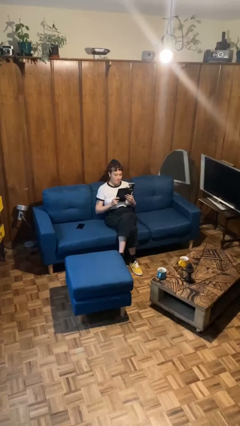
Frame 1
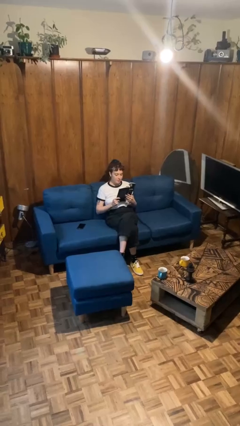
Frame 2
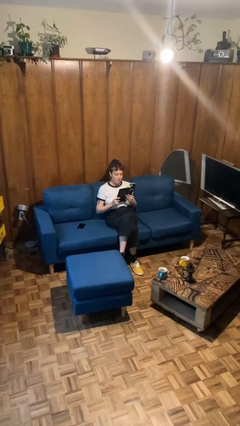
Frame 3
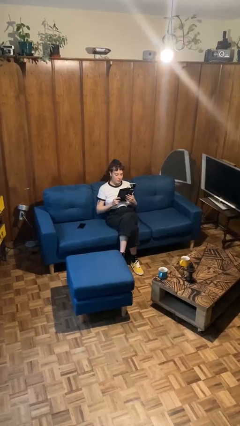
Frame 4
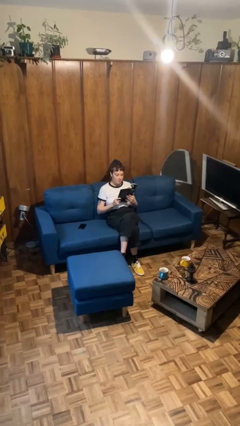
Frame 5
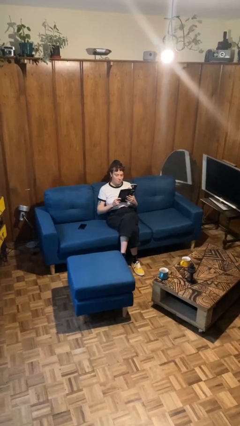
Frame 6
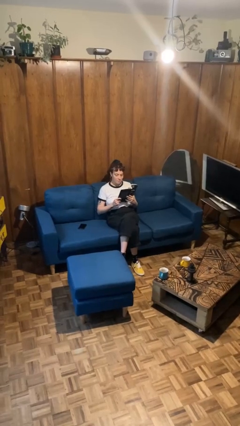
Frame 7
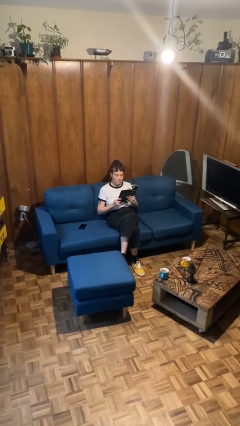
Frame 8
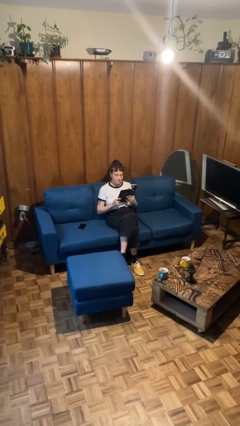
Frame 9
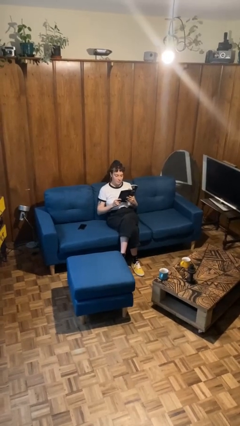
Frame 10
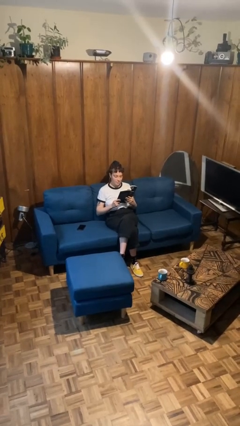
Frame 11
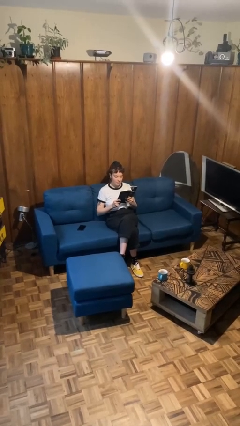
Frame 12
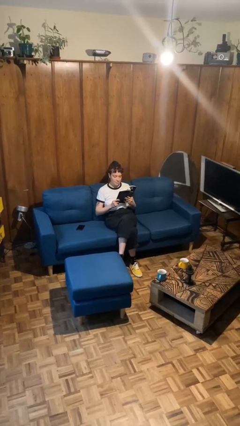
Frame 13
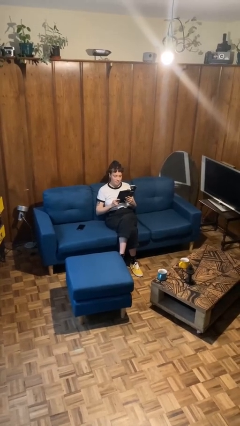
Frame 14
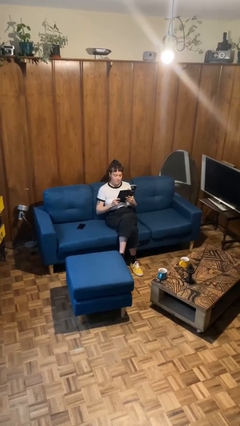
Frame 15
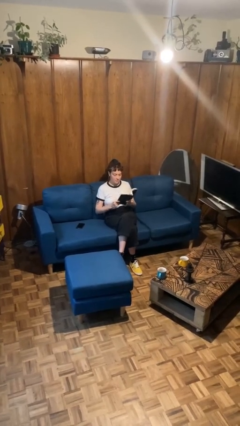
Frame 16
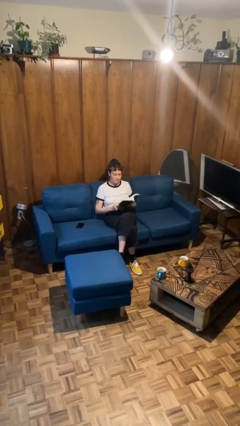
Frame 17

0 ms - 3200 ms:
person reads document

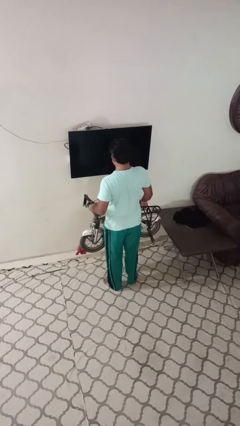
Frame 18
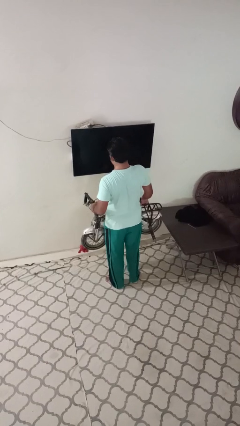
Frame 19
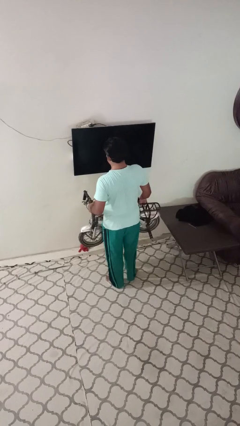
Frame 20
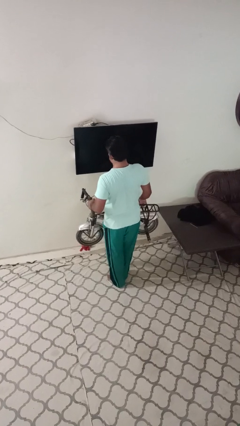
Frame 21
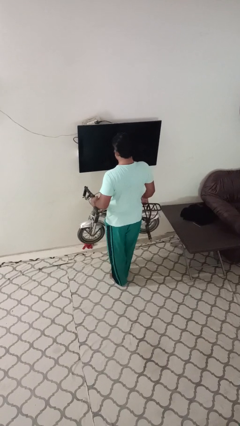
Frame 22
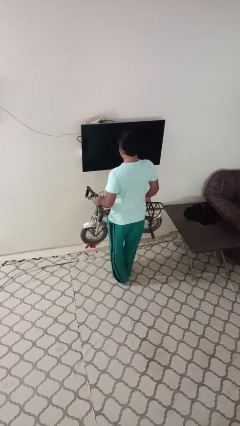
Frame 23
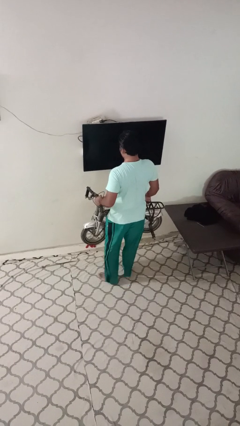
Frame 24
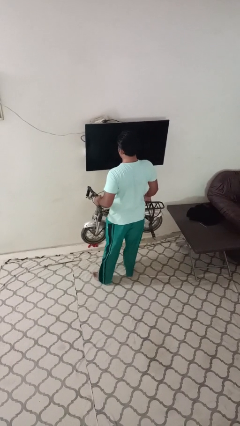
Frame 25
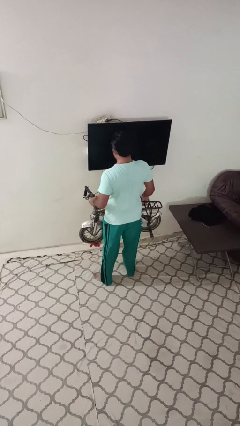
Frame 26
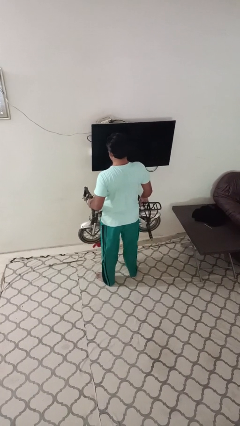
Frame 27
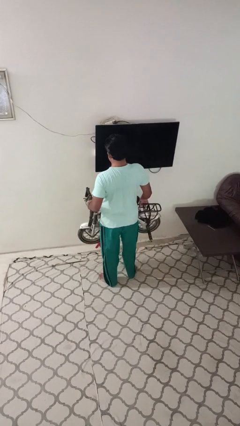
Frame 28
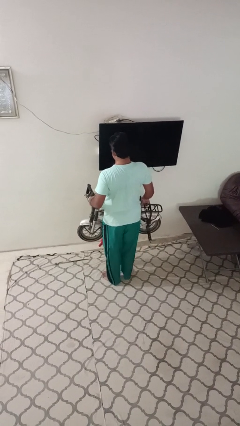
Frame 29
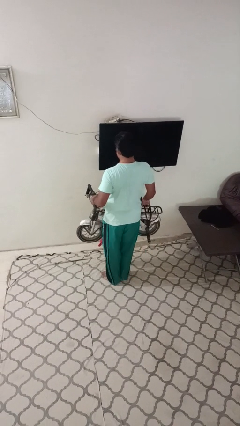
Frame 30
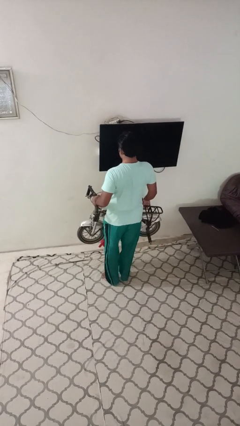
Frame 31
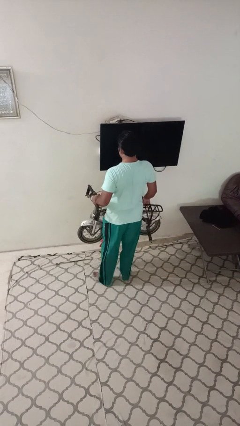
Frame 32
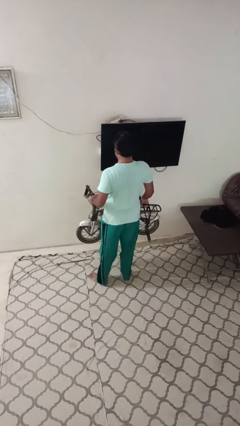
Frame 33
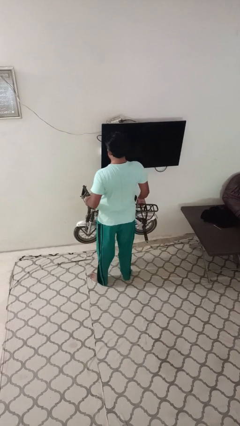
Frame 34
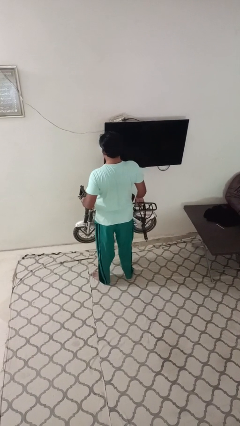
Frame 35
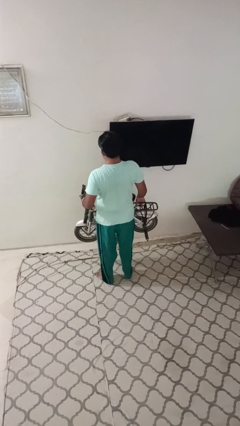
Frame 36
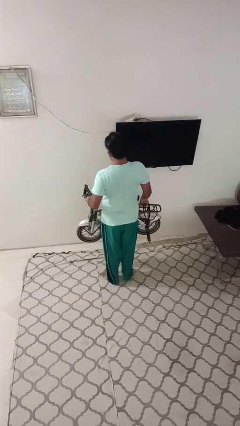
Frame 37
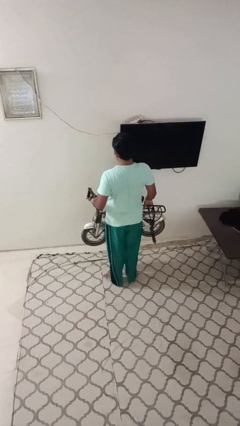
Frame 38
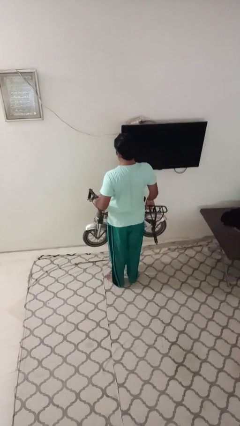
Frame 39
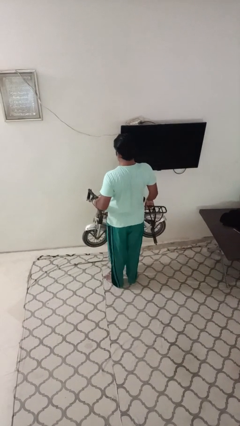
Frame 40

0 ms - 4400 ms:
person carries bicycle

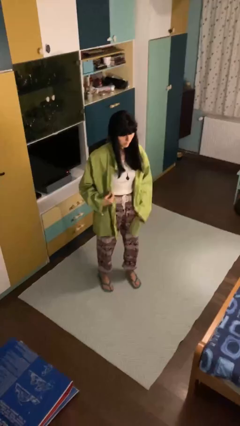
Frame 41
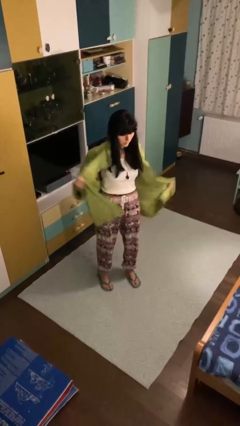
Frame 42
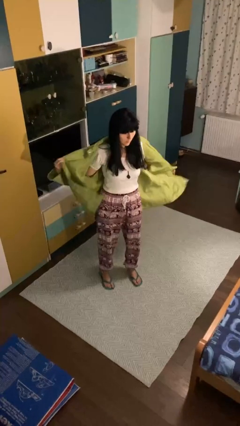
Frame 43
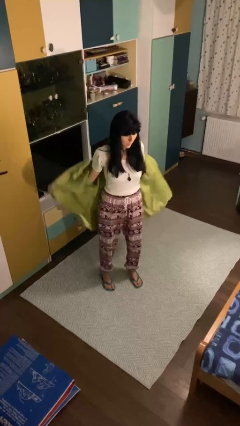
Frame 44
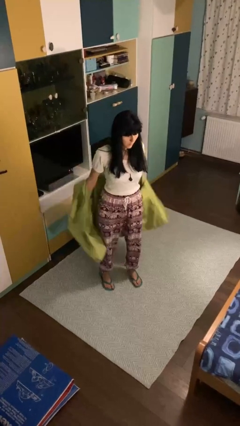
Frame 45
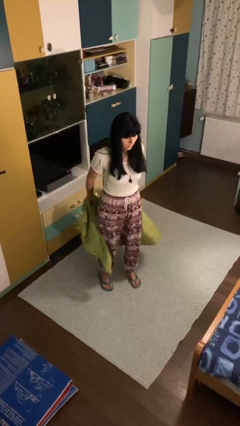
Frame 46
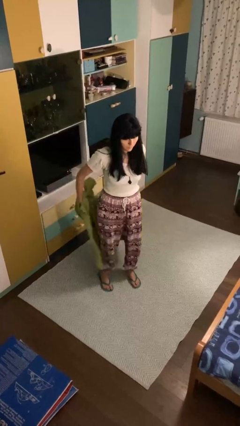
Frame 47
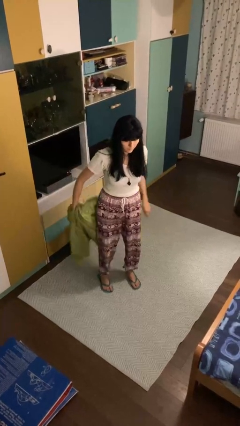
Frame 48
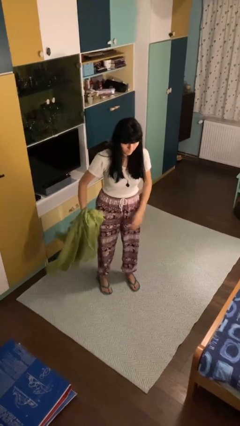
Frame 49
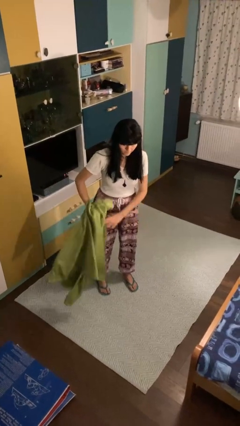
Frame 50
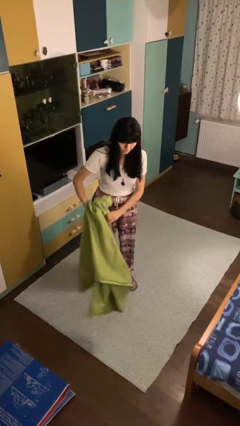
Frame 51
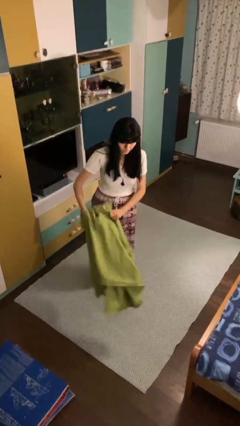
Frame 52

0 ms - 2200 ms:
person takes off jacket

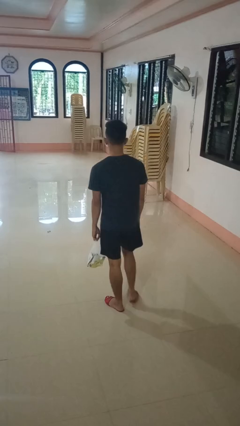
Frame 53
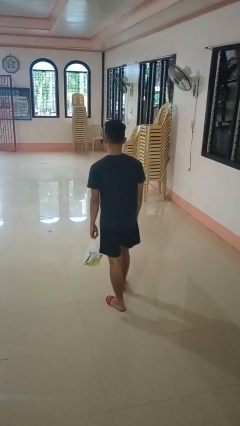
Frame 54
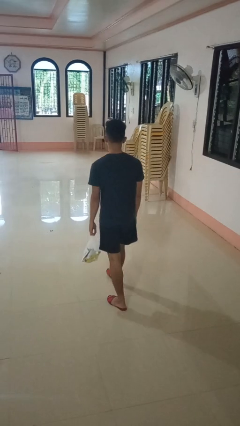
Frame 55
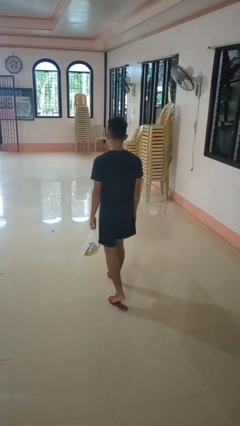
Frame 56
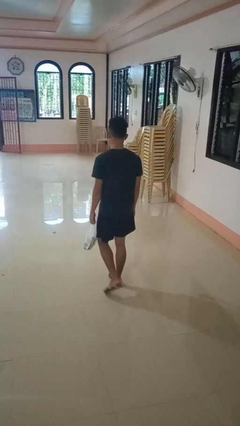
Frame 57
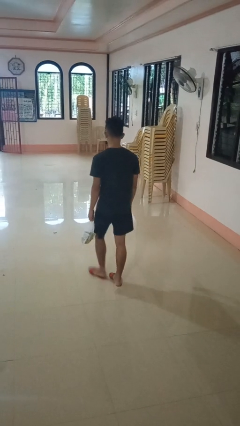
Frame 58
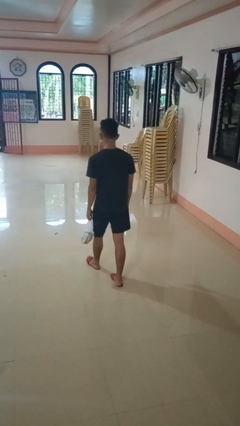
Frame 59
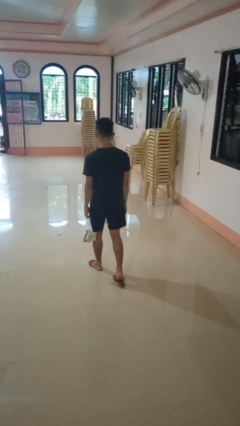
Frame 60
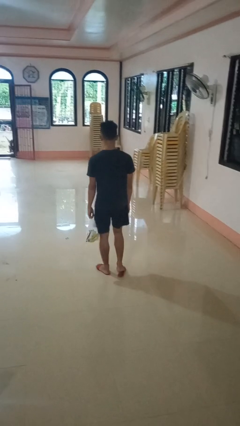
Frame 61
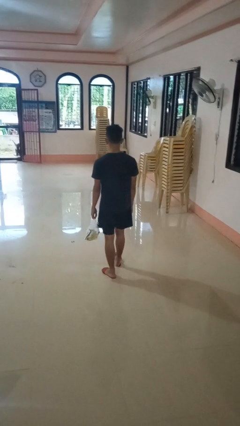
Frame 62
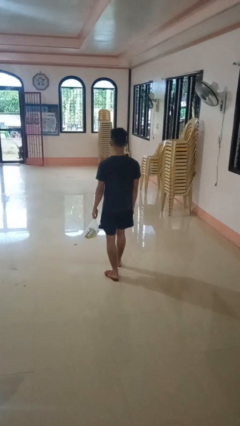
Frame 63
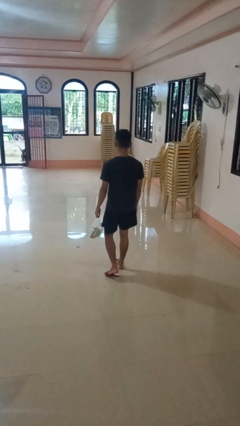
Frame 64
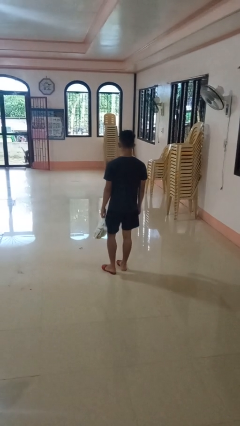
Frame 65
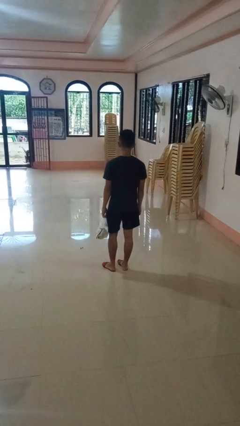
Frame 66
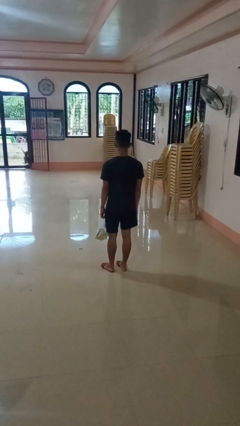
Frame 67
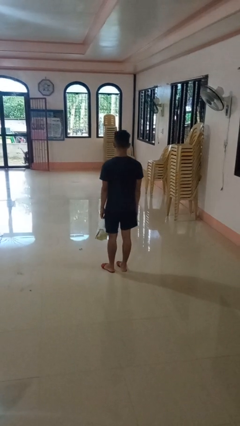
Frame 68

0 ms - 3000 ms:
person carries groceries

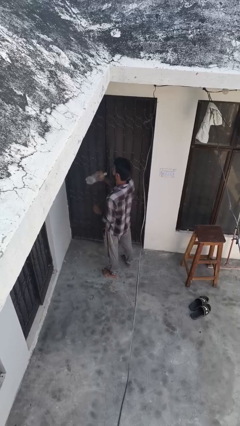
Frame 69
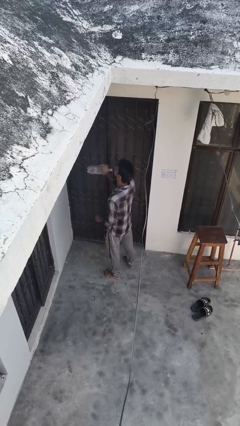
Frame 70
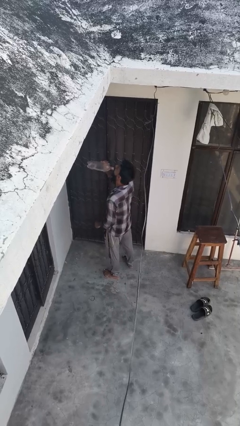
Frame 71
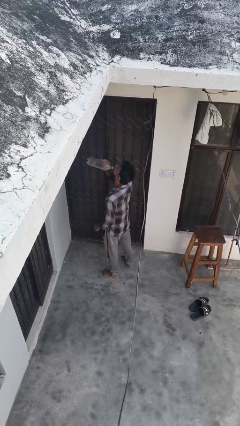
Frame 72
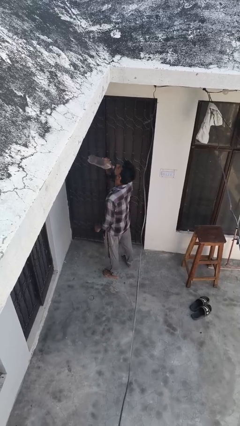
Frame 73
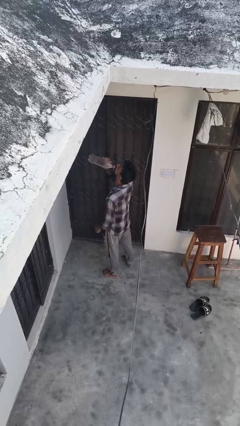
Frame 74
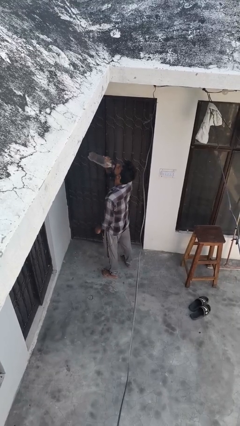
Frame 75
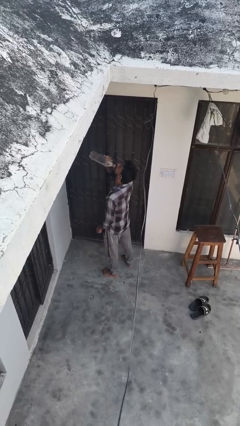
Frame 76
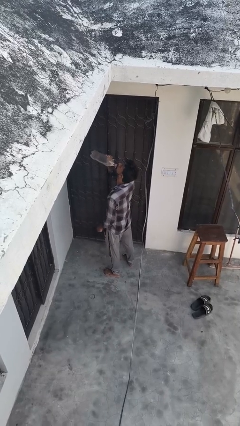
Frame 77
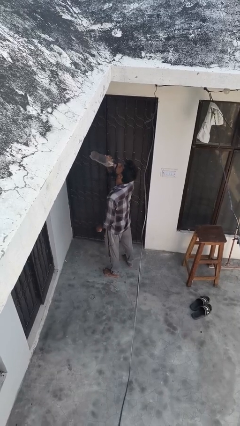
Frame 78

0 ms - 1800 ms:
person drinks from bottle

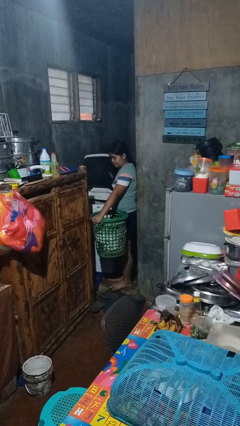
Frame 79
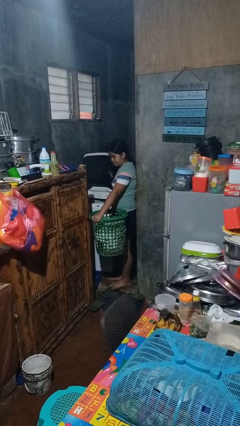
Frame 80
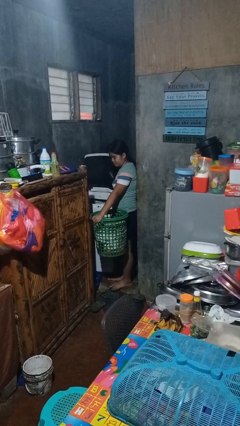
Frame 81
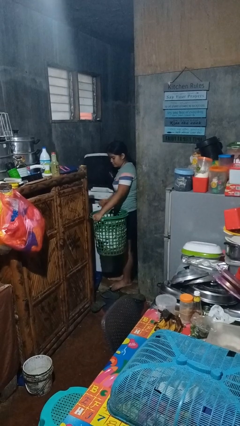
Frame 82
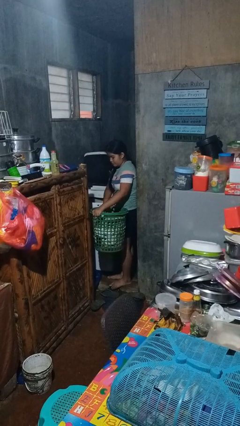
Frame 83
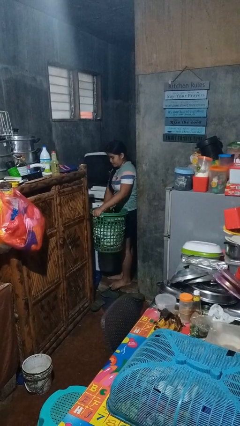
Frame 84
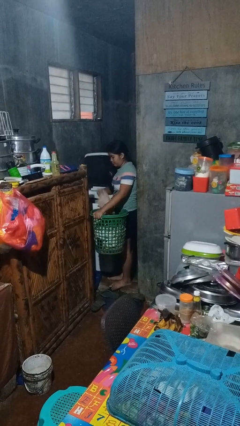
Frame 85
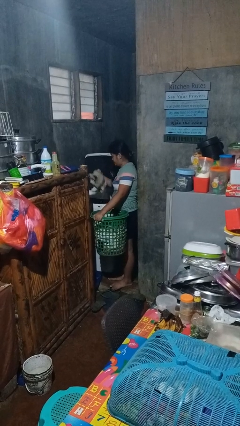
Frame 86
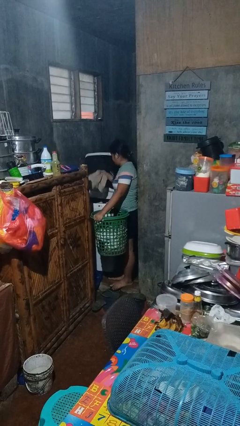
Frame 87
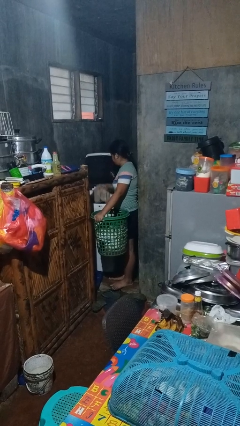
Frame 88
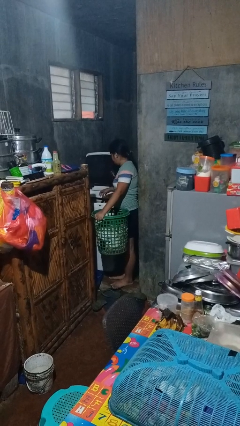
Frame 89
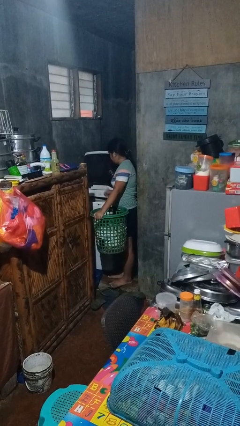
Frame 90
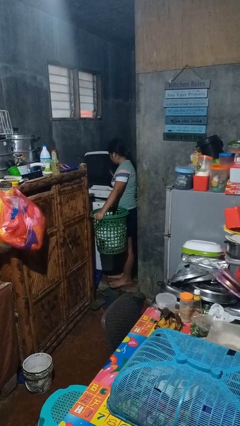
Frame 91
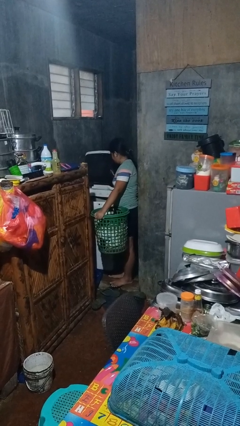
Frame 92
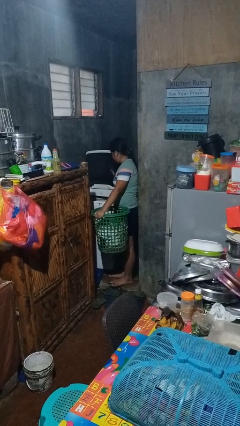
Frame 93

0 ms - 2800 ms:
person loads clotheswasher
